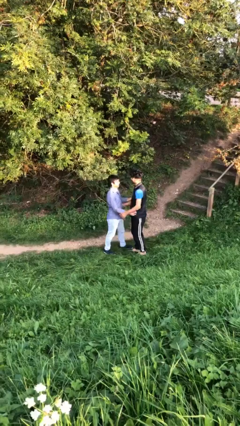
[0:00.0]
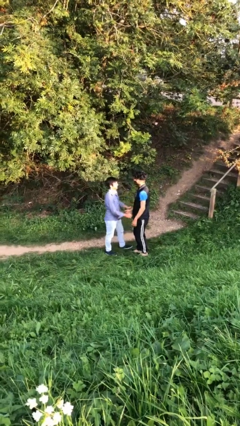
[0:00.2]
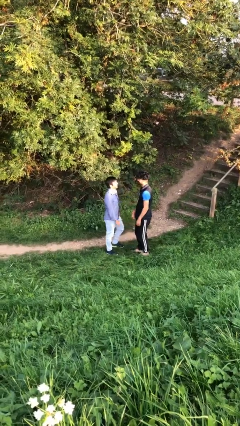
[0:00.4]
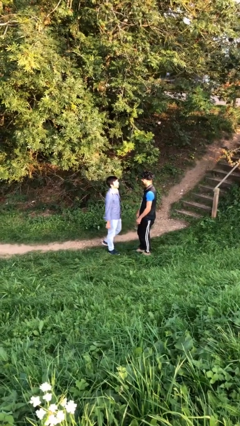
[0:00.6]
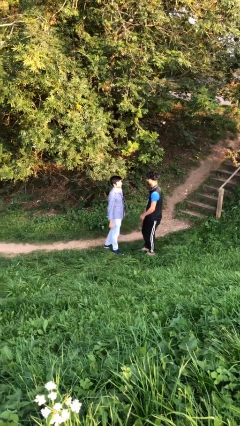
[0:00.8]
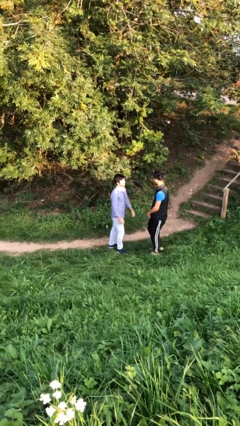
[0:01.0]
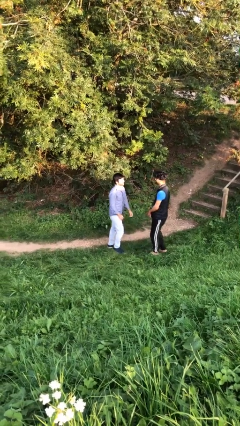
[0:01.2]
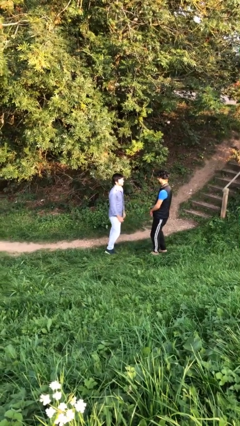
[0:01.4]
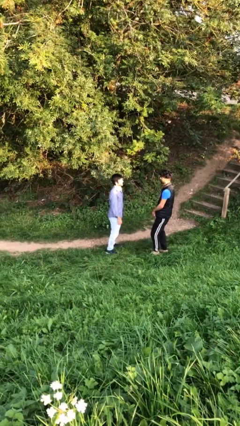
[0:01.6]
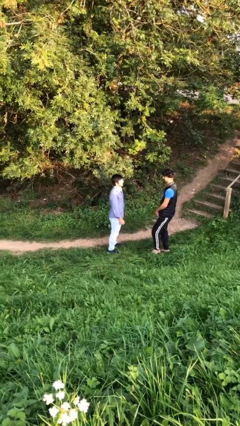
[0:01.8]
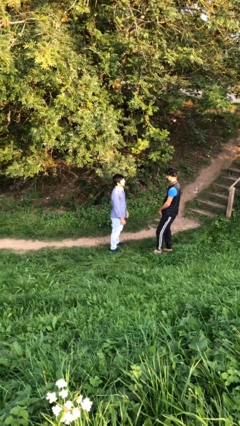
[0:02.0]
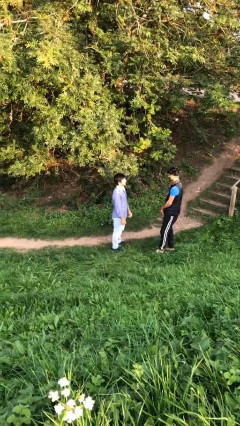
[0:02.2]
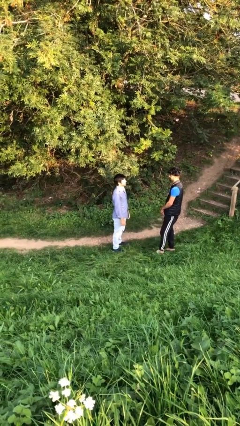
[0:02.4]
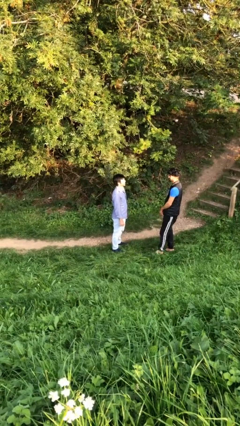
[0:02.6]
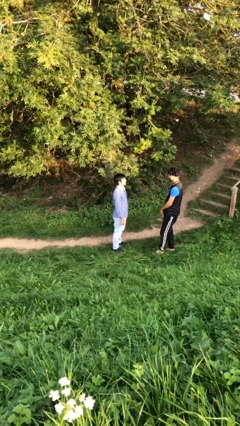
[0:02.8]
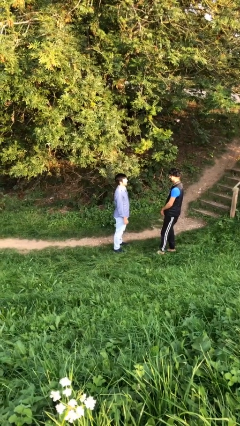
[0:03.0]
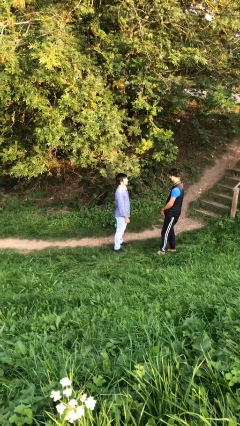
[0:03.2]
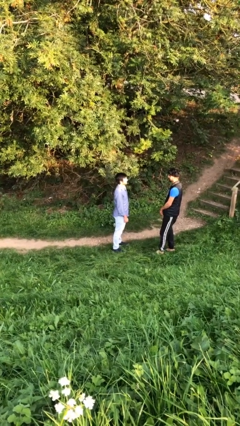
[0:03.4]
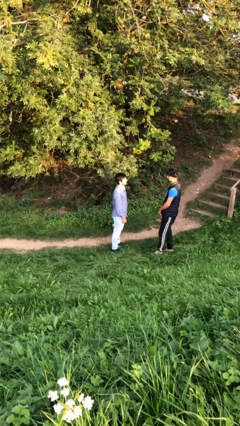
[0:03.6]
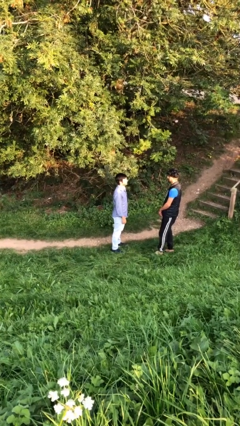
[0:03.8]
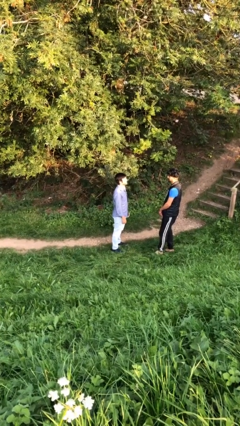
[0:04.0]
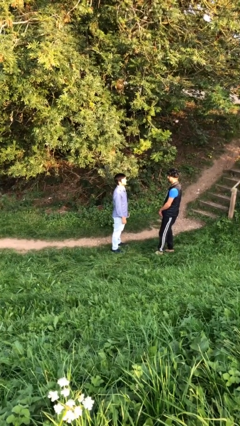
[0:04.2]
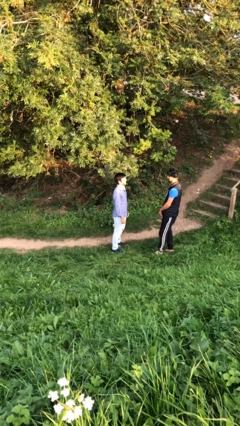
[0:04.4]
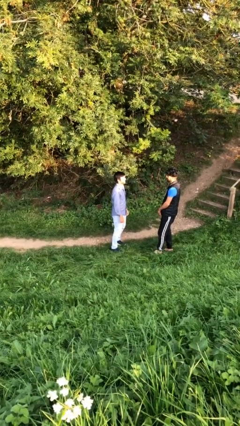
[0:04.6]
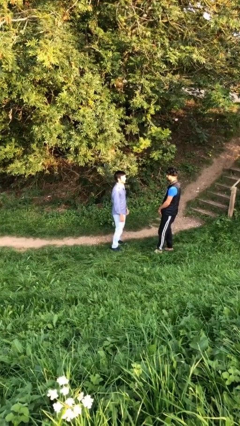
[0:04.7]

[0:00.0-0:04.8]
person talks to person

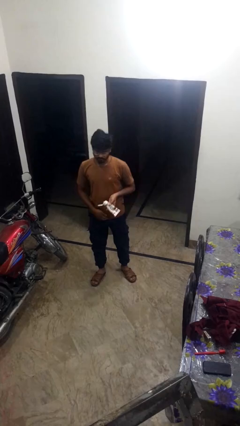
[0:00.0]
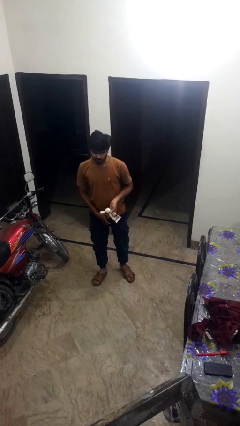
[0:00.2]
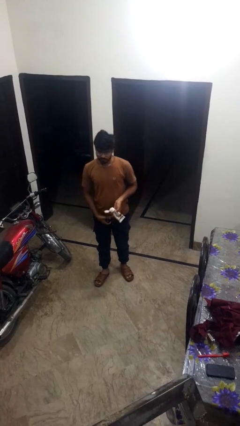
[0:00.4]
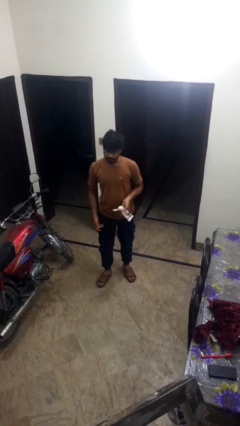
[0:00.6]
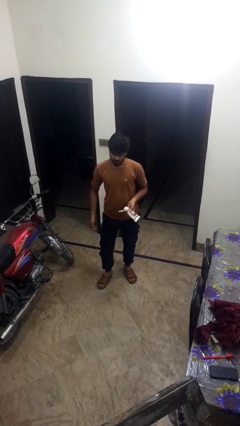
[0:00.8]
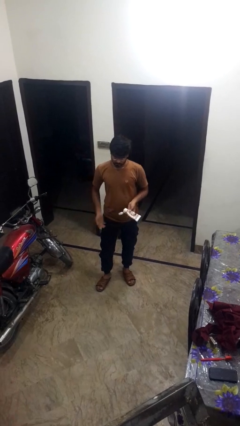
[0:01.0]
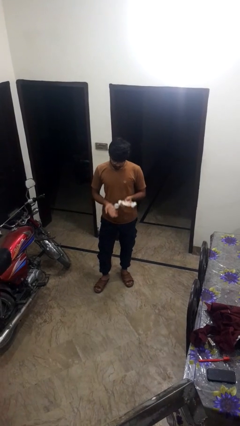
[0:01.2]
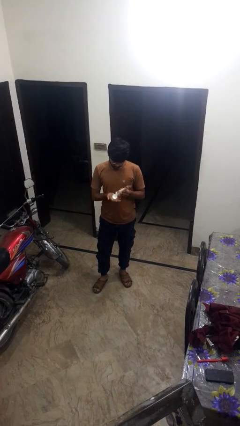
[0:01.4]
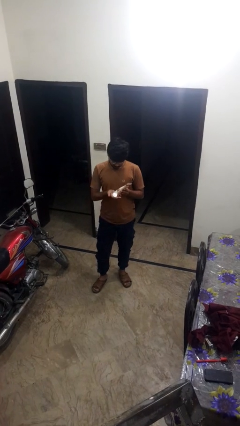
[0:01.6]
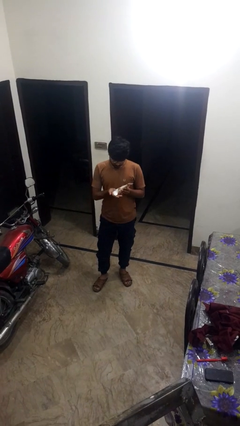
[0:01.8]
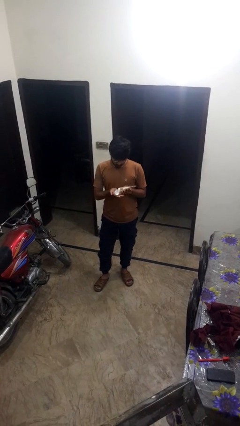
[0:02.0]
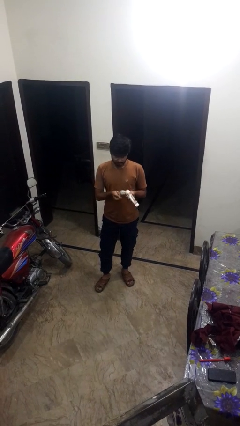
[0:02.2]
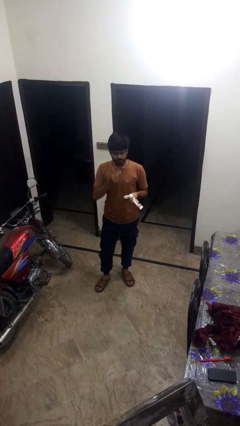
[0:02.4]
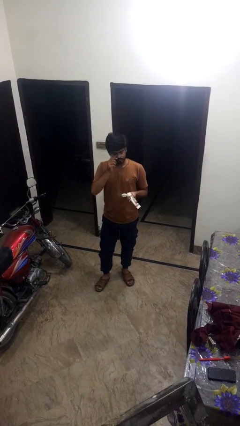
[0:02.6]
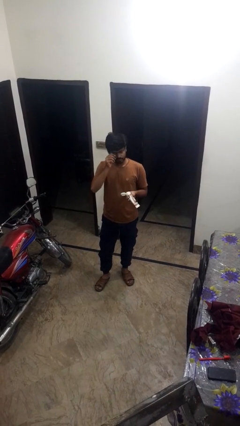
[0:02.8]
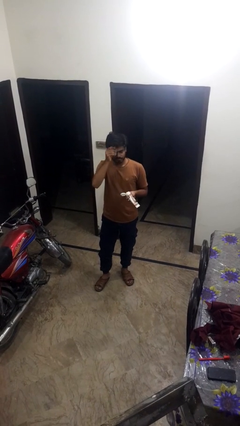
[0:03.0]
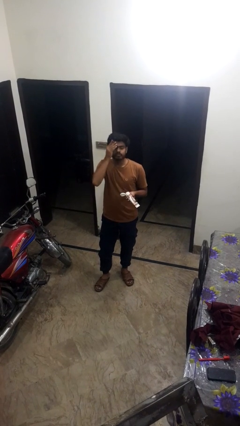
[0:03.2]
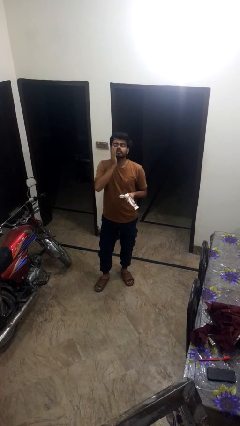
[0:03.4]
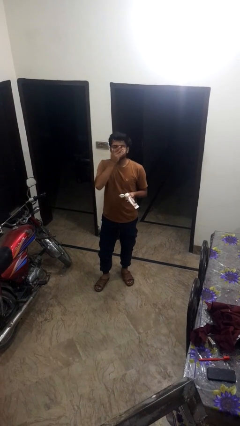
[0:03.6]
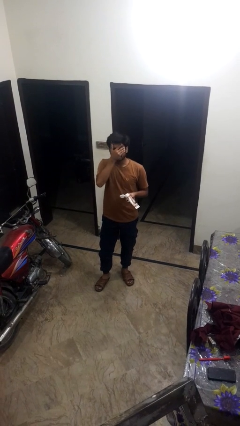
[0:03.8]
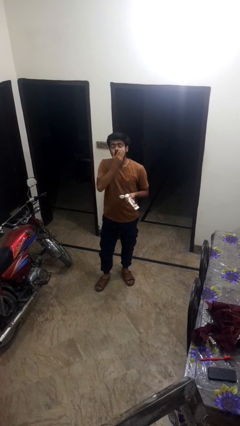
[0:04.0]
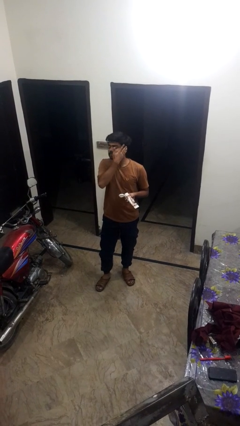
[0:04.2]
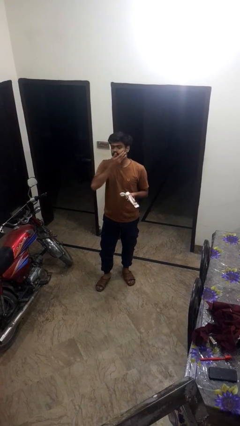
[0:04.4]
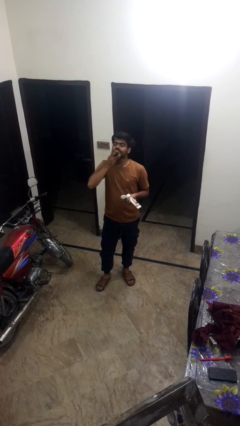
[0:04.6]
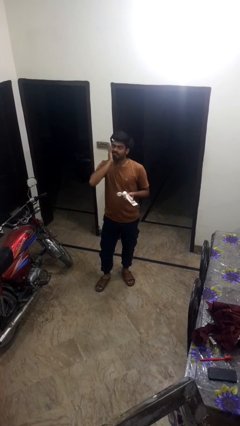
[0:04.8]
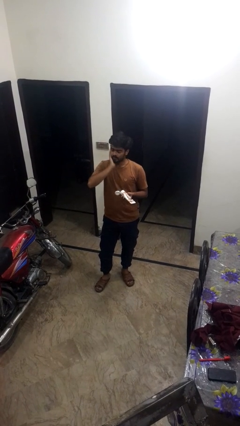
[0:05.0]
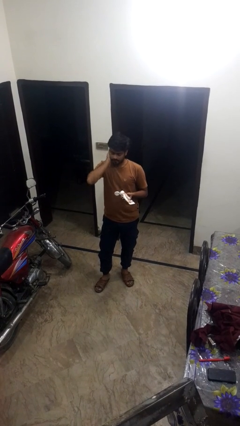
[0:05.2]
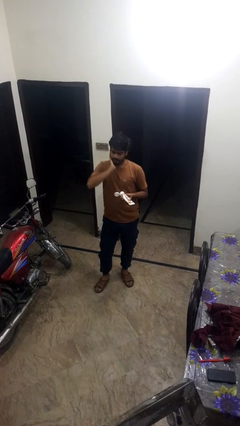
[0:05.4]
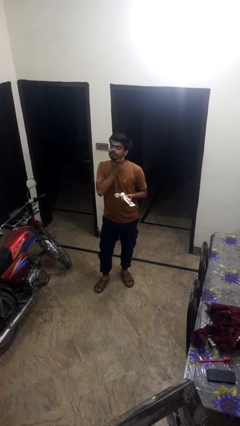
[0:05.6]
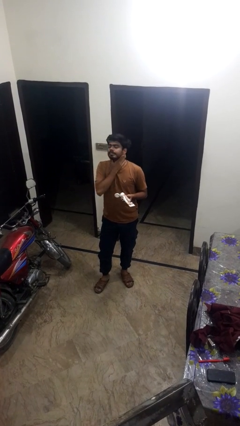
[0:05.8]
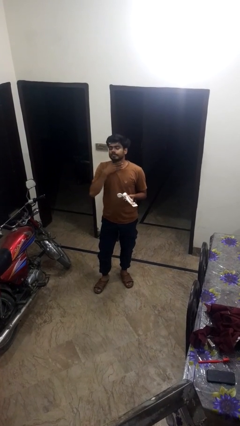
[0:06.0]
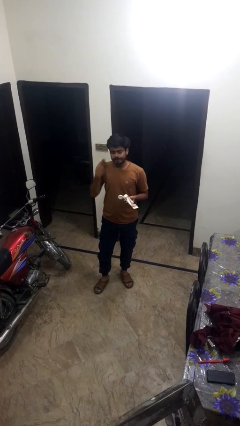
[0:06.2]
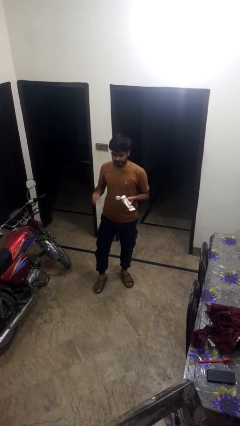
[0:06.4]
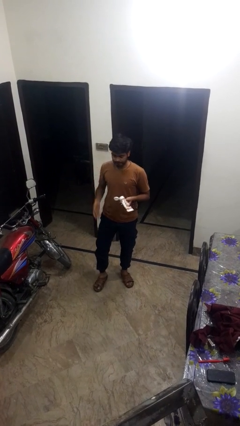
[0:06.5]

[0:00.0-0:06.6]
person applies sunscreen

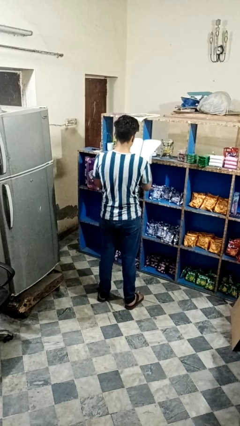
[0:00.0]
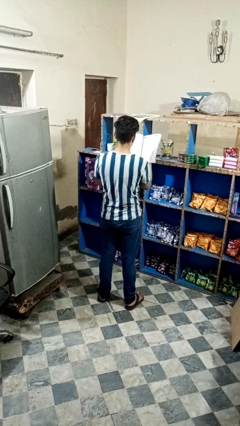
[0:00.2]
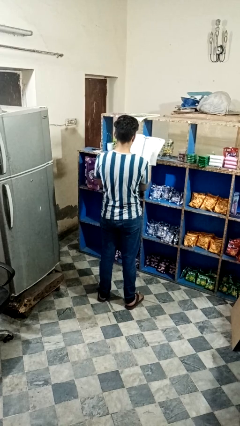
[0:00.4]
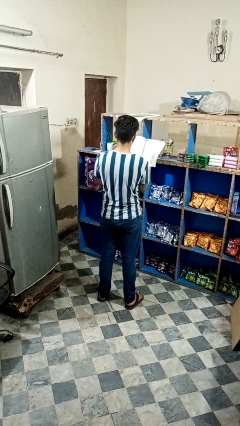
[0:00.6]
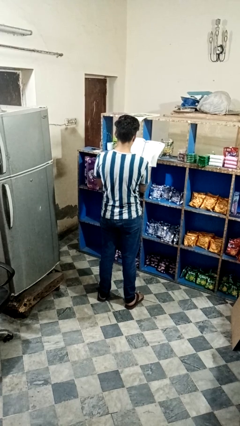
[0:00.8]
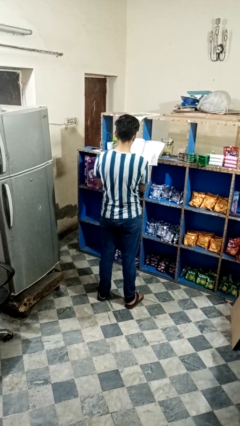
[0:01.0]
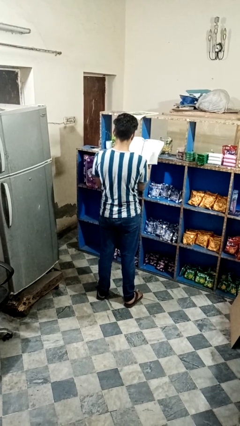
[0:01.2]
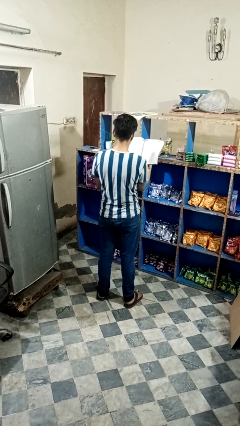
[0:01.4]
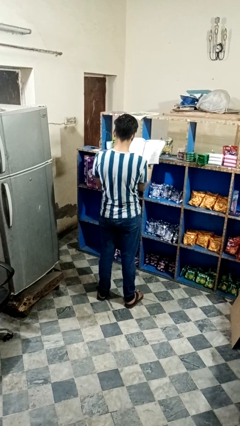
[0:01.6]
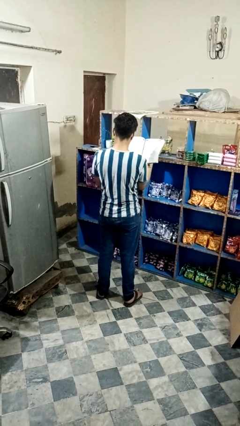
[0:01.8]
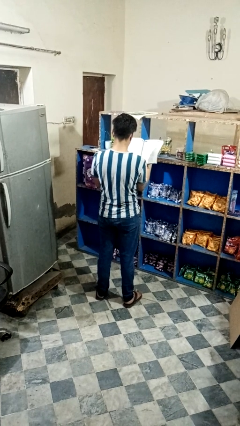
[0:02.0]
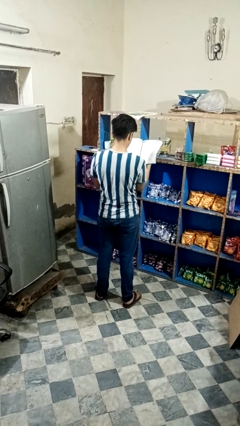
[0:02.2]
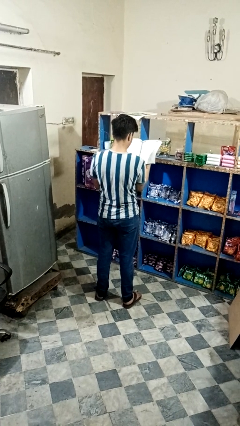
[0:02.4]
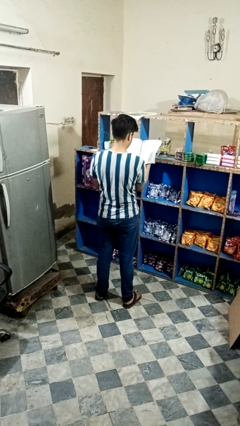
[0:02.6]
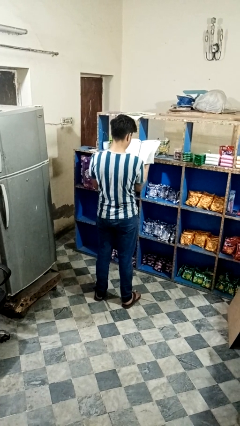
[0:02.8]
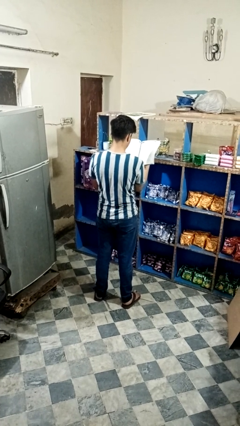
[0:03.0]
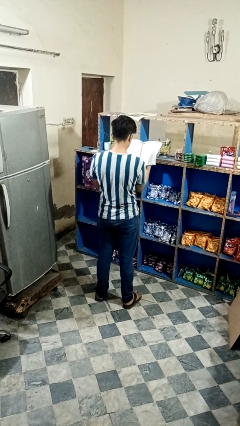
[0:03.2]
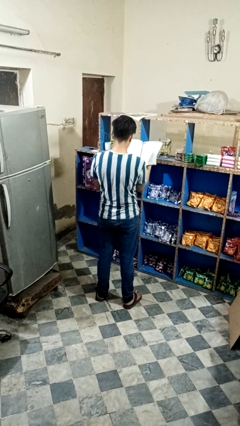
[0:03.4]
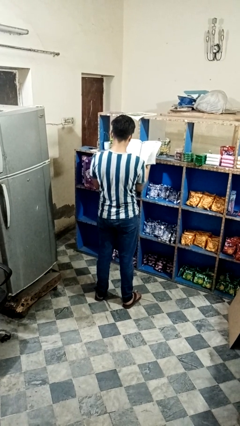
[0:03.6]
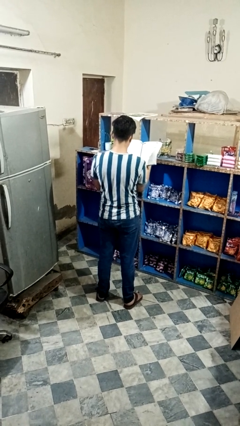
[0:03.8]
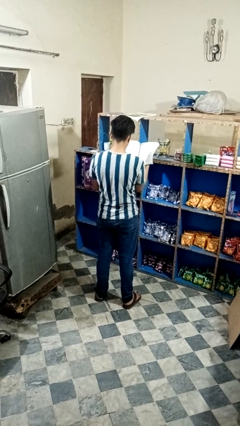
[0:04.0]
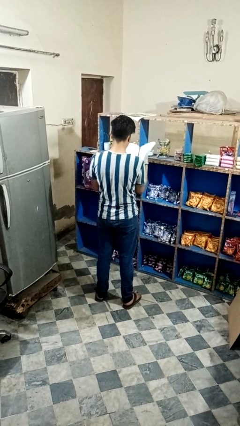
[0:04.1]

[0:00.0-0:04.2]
person reads book

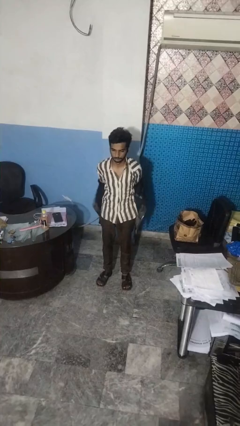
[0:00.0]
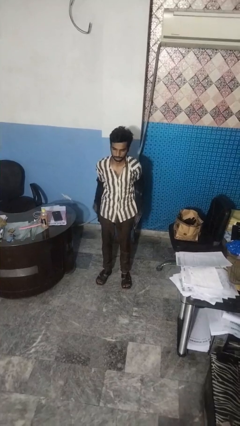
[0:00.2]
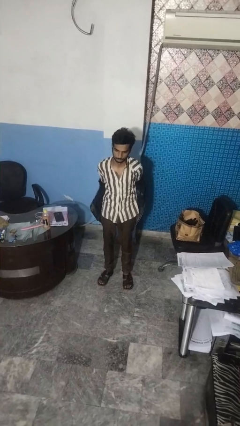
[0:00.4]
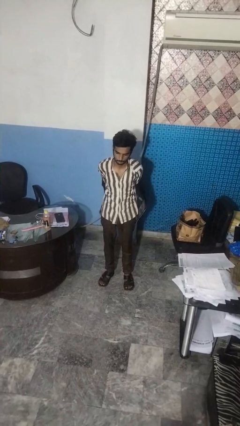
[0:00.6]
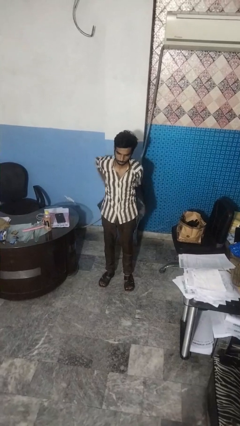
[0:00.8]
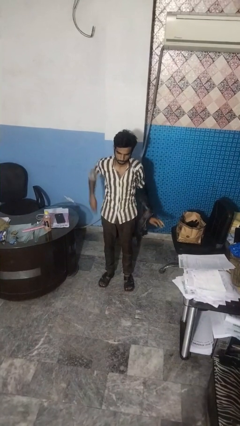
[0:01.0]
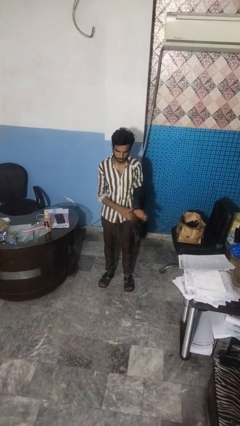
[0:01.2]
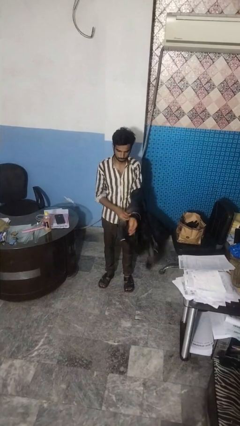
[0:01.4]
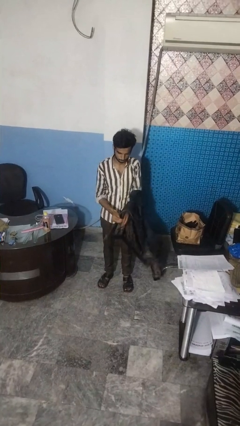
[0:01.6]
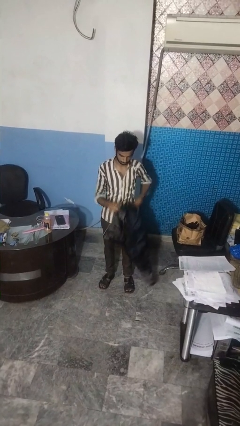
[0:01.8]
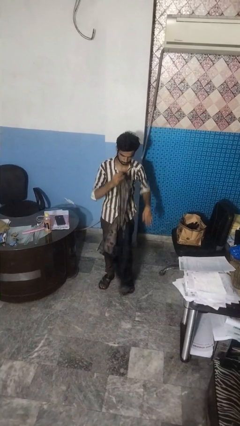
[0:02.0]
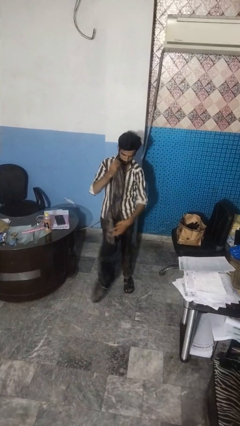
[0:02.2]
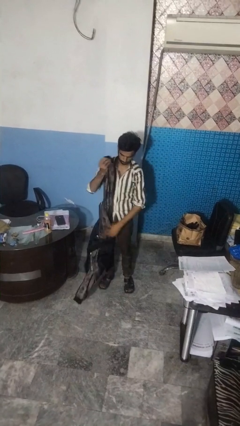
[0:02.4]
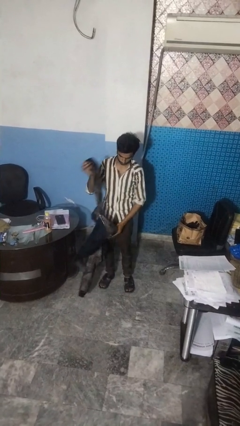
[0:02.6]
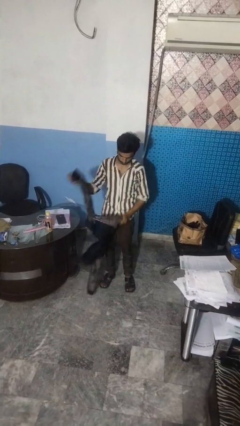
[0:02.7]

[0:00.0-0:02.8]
person takes off jacket
